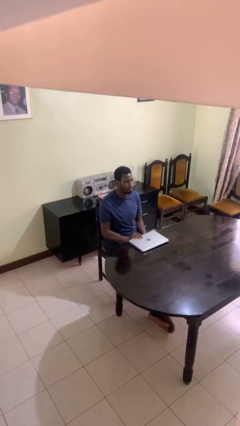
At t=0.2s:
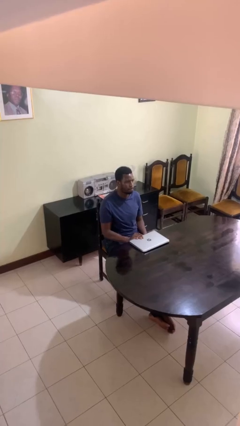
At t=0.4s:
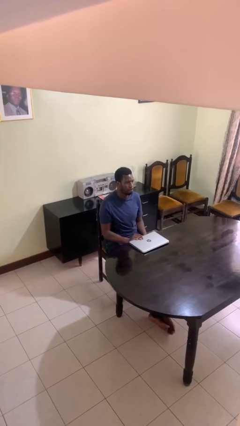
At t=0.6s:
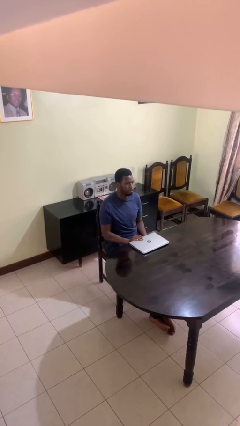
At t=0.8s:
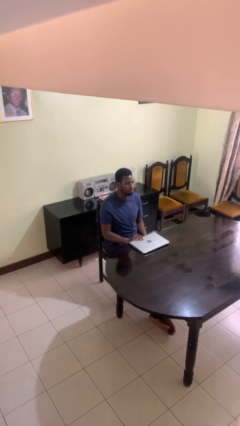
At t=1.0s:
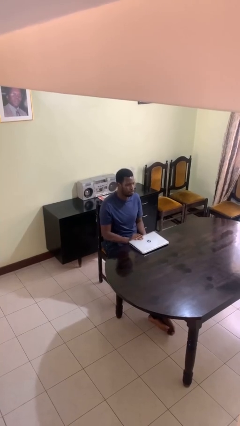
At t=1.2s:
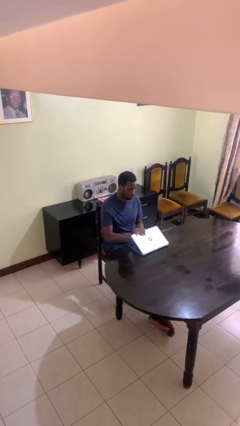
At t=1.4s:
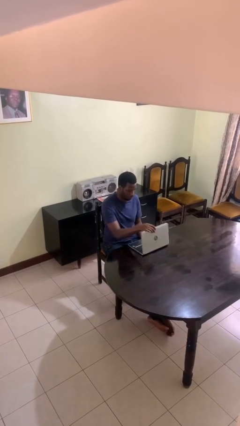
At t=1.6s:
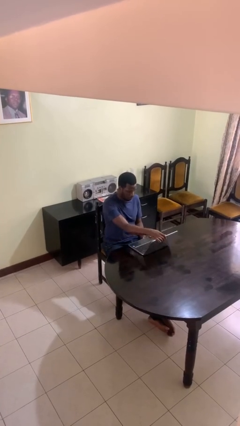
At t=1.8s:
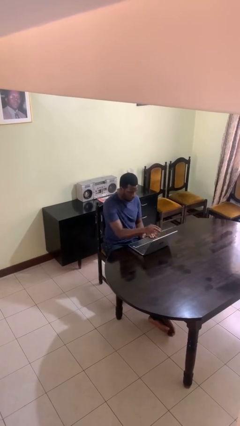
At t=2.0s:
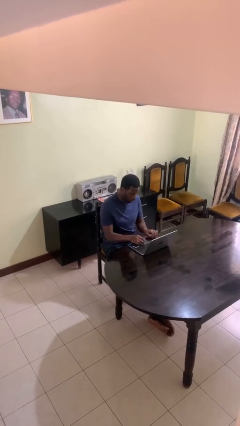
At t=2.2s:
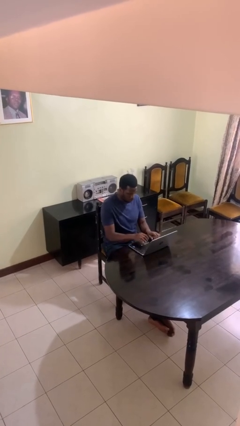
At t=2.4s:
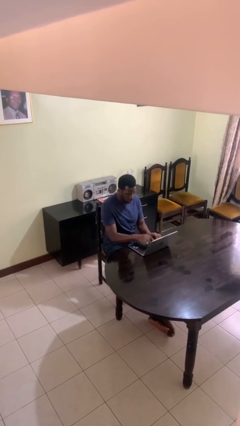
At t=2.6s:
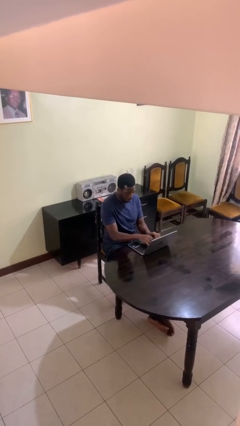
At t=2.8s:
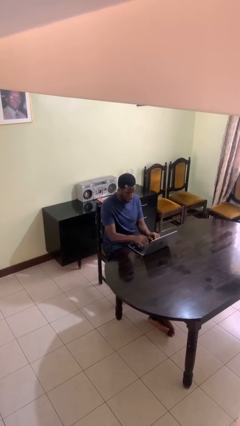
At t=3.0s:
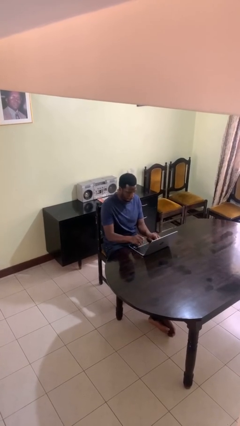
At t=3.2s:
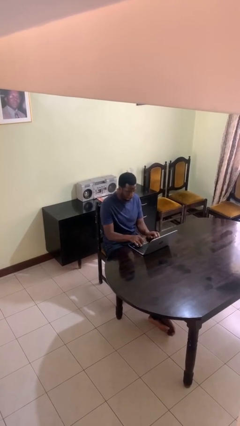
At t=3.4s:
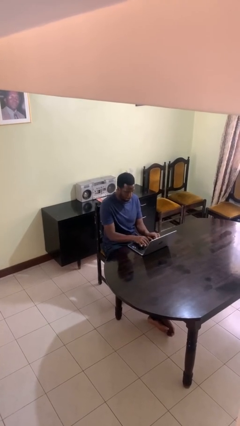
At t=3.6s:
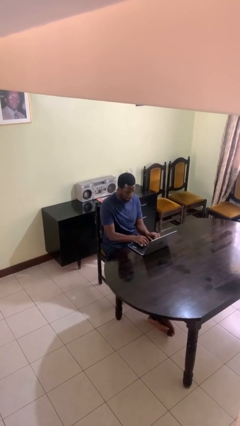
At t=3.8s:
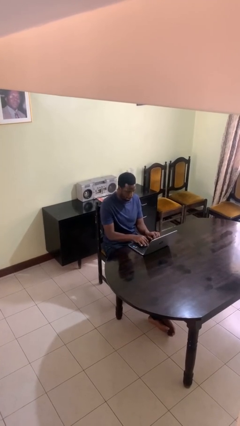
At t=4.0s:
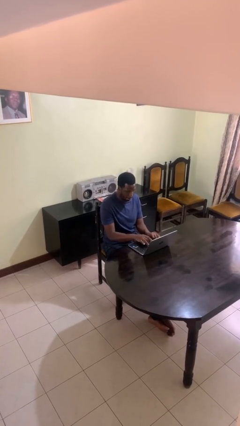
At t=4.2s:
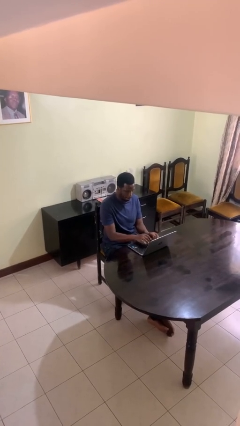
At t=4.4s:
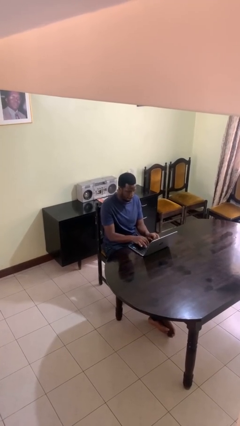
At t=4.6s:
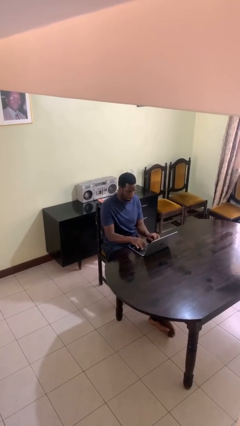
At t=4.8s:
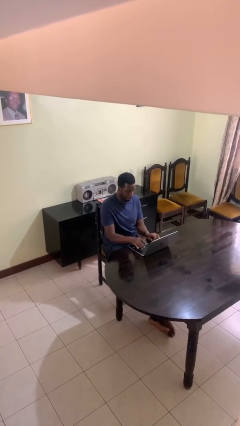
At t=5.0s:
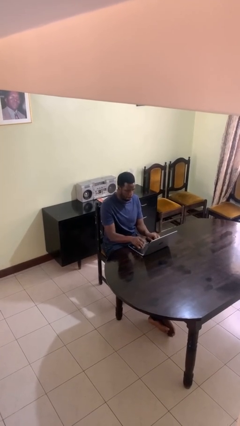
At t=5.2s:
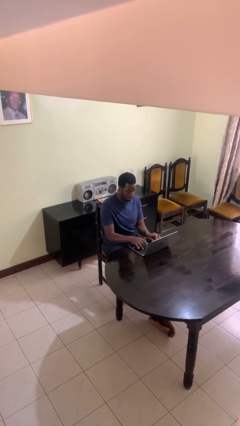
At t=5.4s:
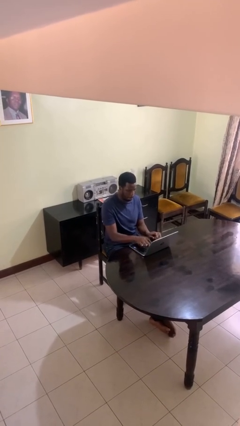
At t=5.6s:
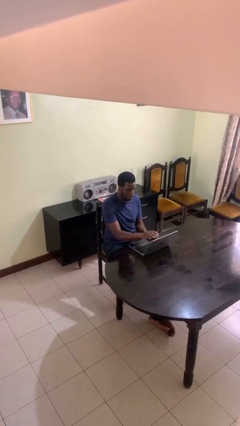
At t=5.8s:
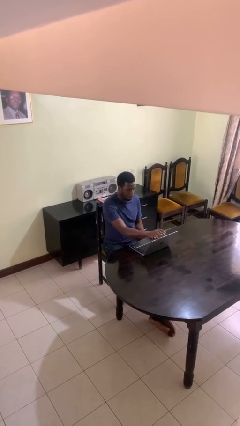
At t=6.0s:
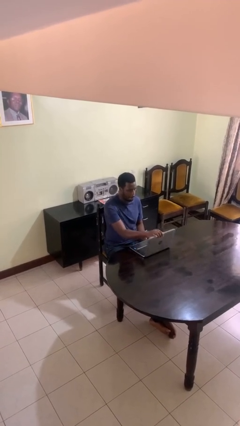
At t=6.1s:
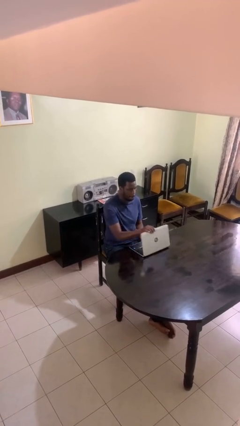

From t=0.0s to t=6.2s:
person interacts with laptop

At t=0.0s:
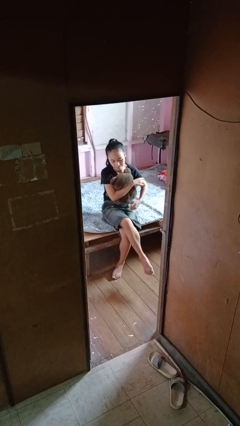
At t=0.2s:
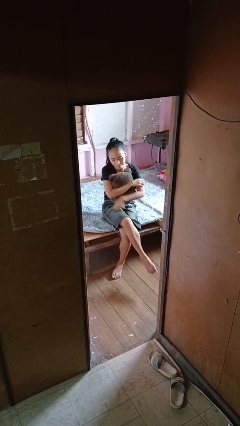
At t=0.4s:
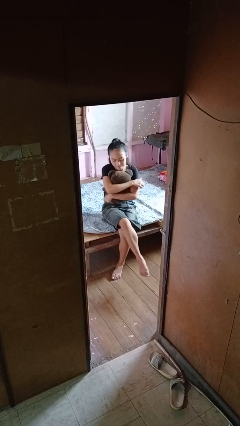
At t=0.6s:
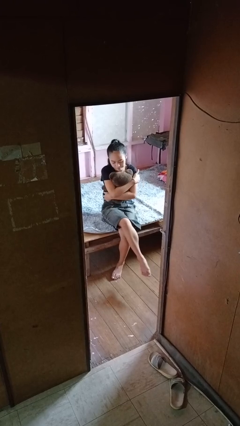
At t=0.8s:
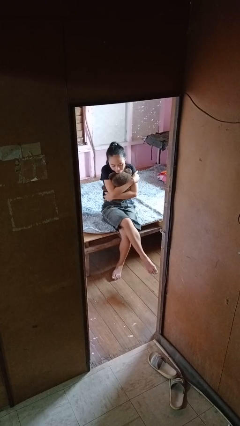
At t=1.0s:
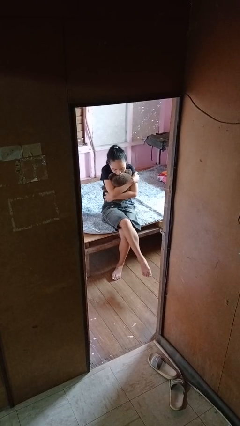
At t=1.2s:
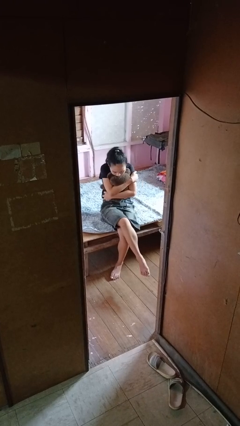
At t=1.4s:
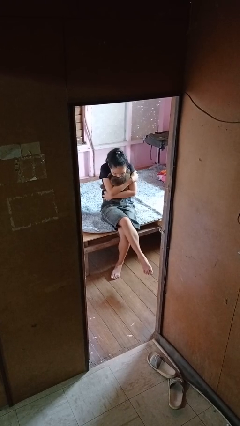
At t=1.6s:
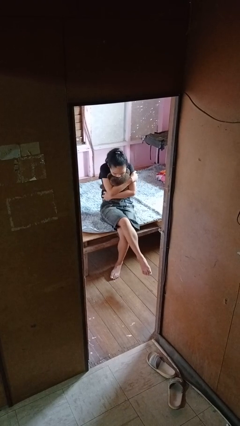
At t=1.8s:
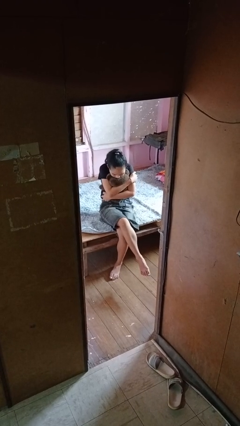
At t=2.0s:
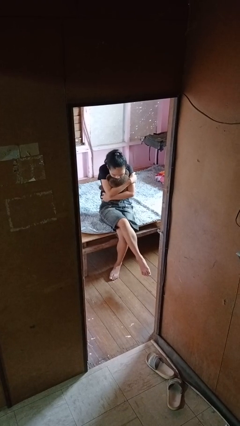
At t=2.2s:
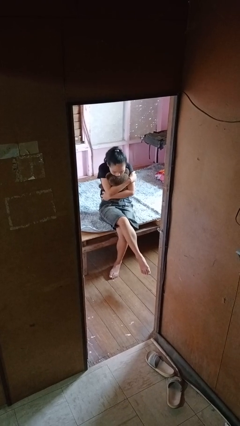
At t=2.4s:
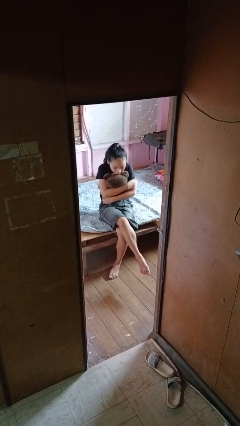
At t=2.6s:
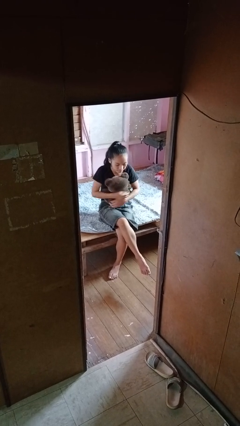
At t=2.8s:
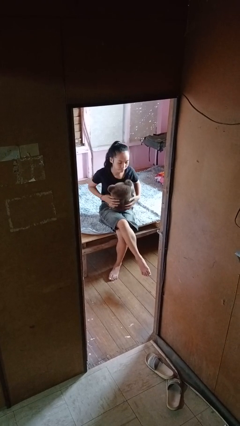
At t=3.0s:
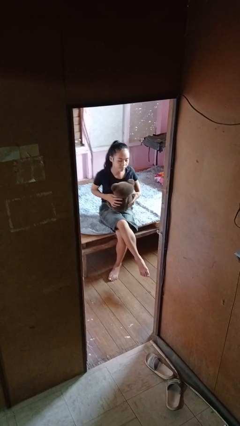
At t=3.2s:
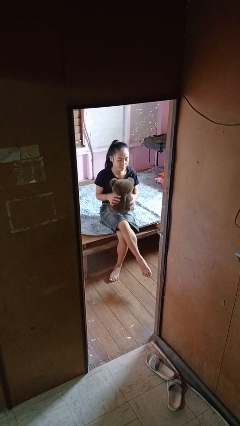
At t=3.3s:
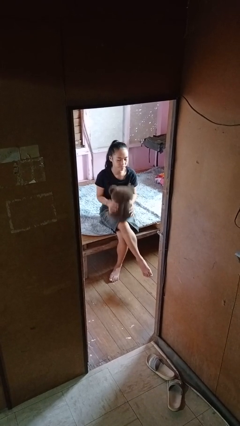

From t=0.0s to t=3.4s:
person hugs stuffed animal

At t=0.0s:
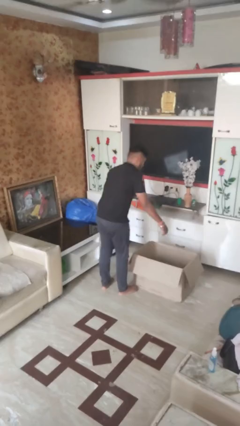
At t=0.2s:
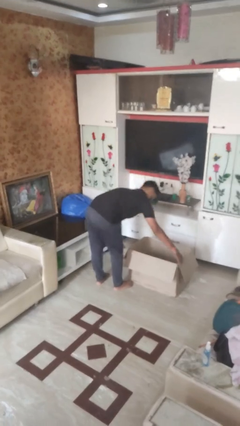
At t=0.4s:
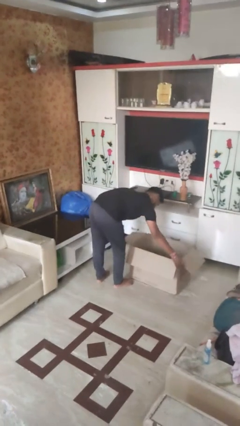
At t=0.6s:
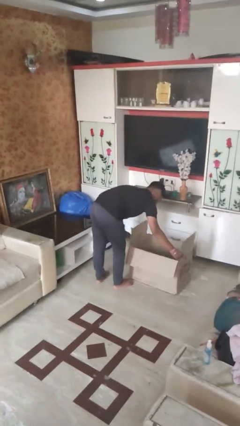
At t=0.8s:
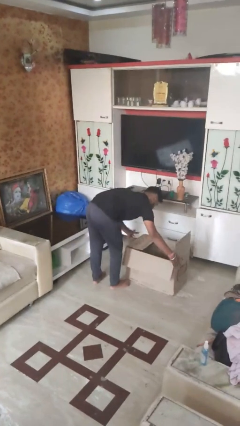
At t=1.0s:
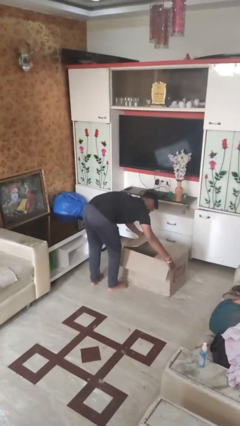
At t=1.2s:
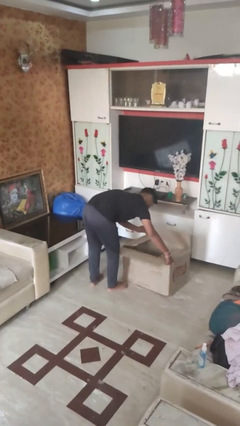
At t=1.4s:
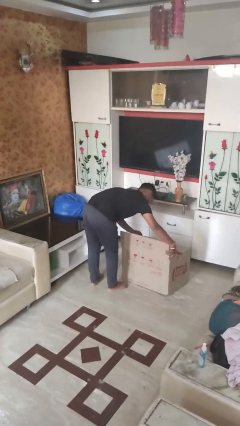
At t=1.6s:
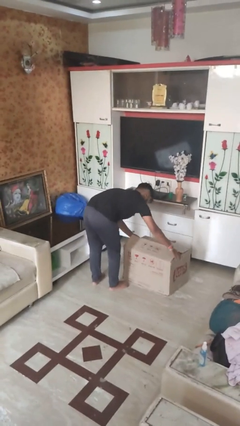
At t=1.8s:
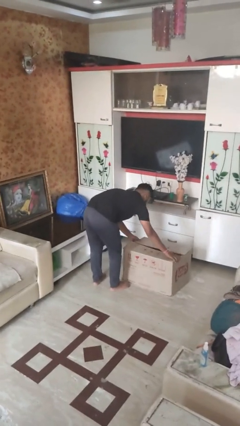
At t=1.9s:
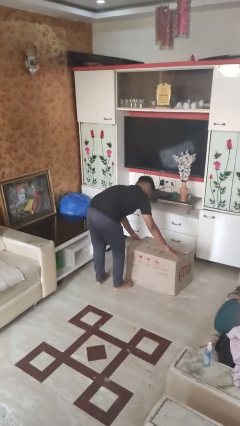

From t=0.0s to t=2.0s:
person closes box

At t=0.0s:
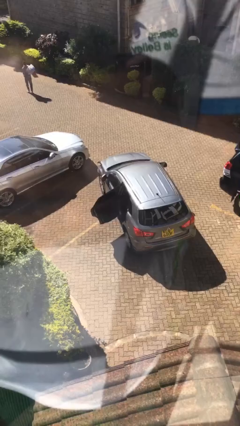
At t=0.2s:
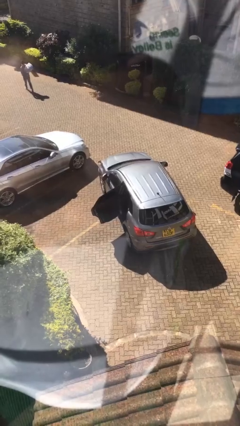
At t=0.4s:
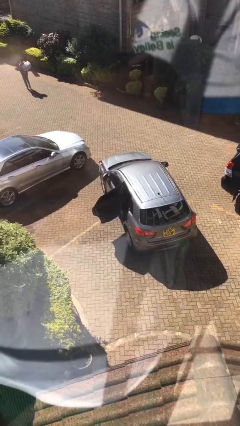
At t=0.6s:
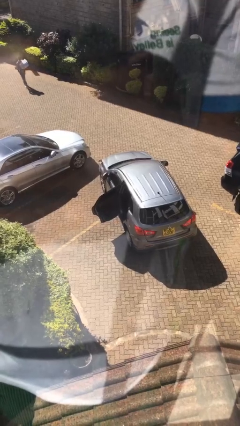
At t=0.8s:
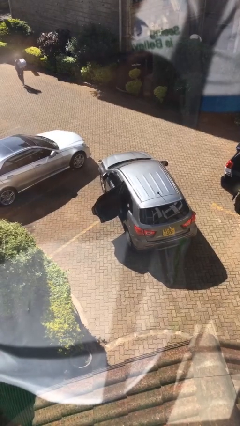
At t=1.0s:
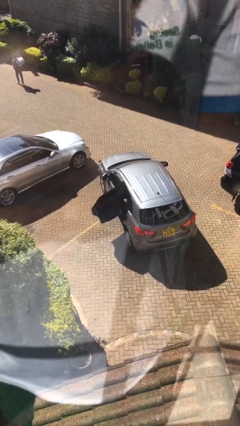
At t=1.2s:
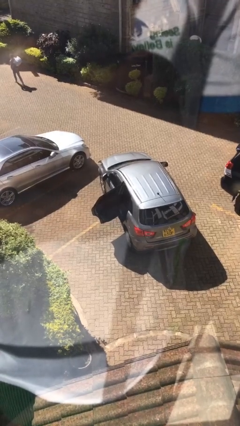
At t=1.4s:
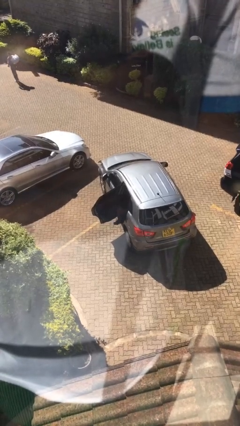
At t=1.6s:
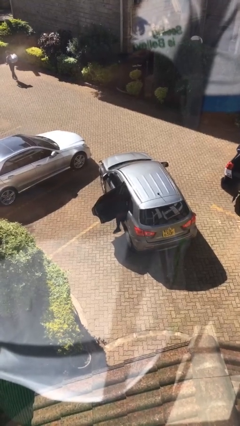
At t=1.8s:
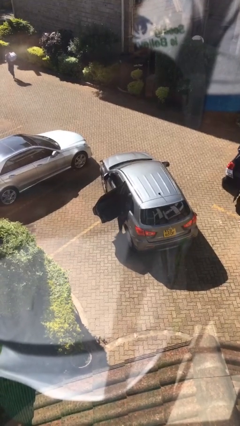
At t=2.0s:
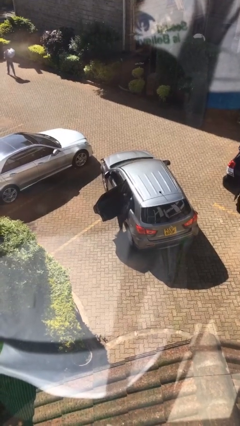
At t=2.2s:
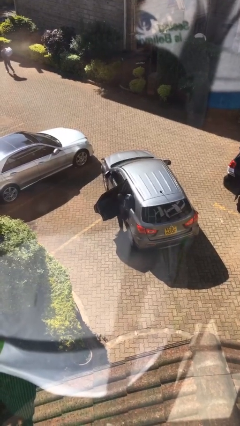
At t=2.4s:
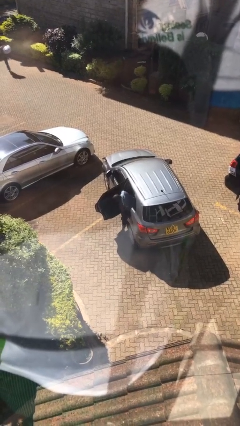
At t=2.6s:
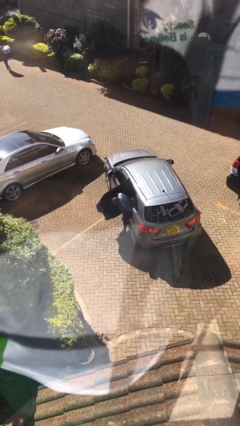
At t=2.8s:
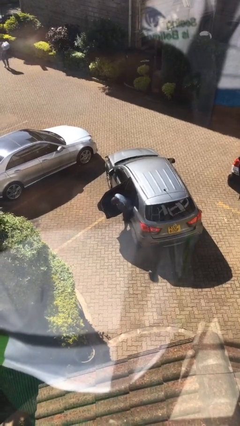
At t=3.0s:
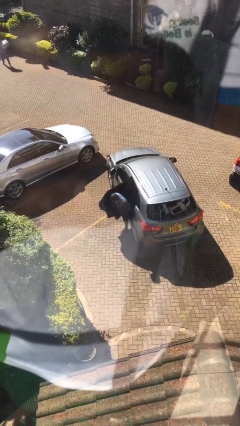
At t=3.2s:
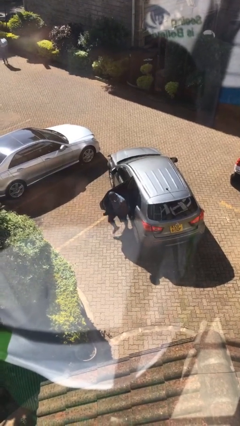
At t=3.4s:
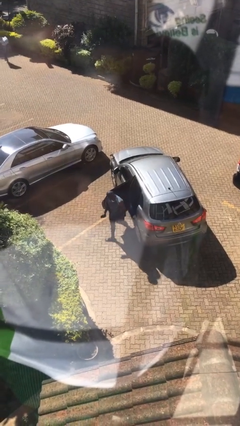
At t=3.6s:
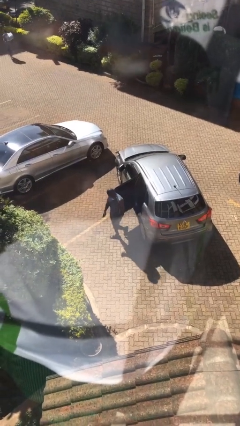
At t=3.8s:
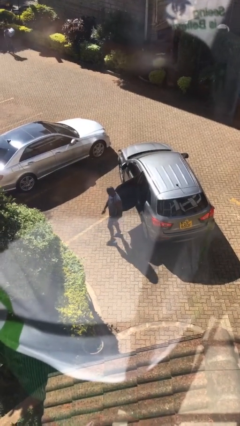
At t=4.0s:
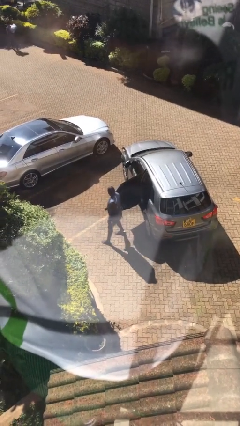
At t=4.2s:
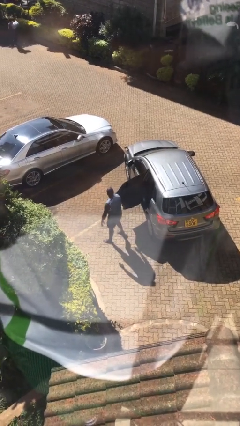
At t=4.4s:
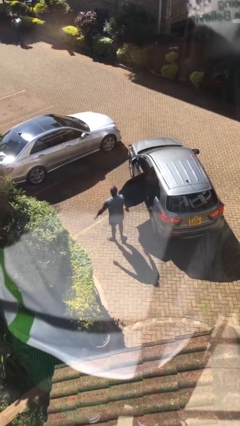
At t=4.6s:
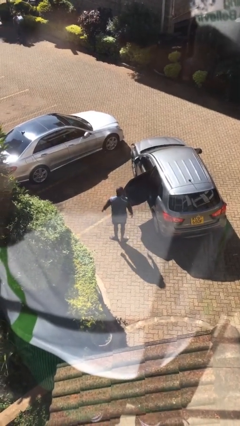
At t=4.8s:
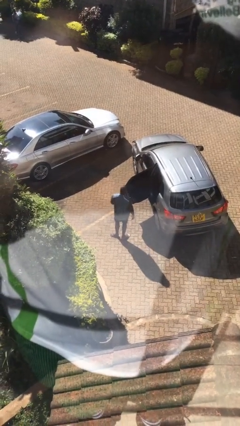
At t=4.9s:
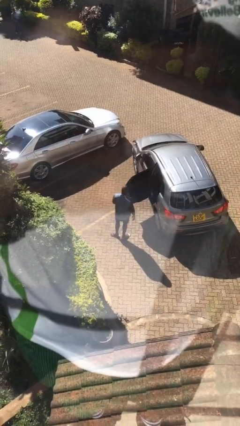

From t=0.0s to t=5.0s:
person exits car

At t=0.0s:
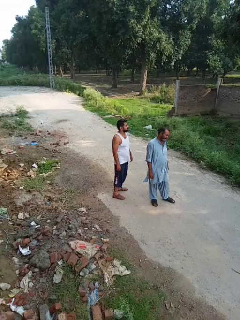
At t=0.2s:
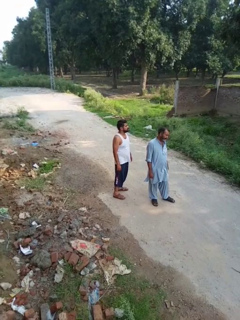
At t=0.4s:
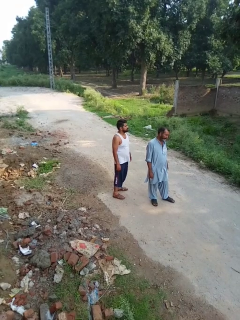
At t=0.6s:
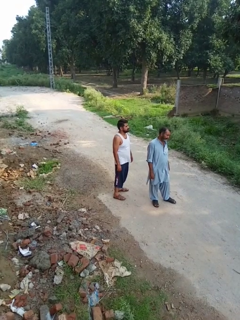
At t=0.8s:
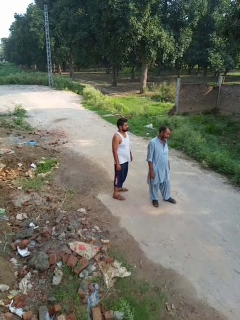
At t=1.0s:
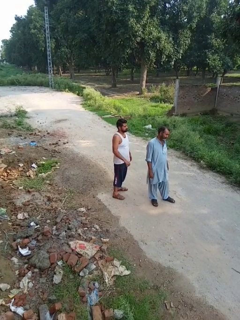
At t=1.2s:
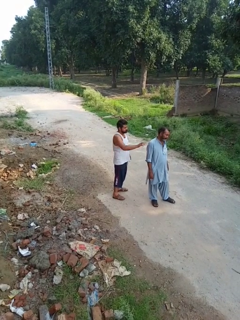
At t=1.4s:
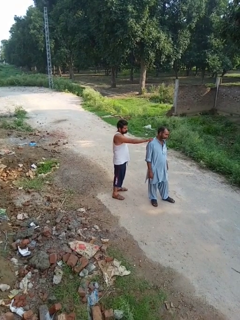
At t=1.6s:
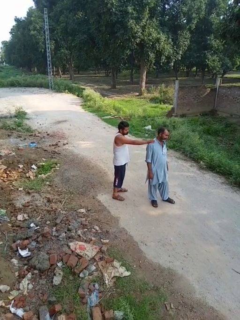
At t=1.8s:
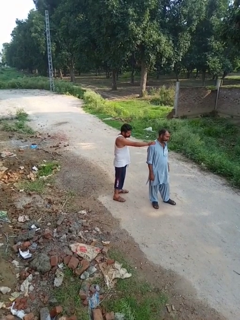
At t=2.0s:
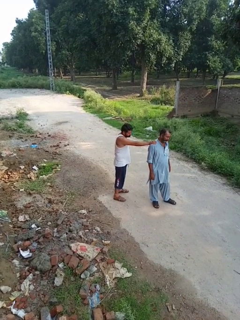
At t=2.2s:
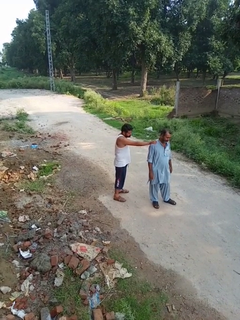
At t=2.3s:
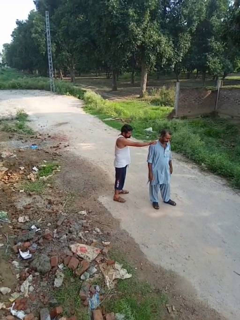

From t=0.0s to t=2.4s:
person grabs person by shoulder
